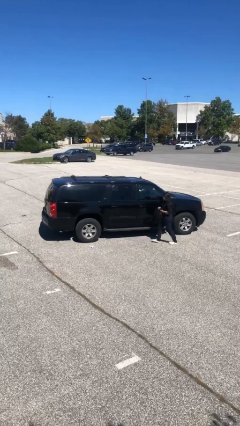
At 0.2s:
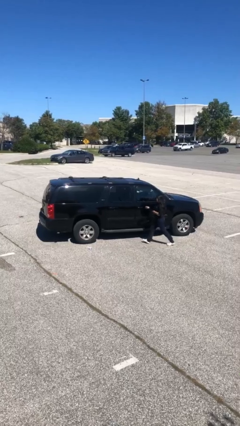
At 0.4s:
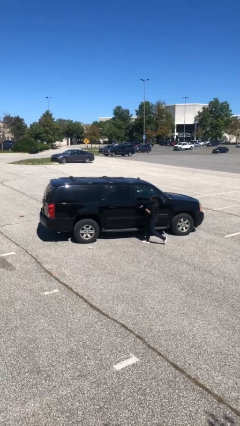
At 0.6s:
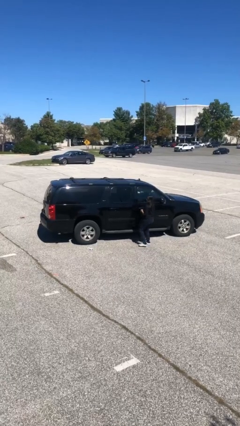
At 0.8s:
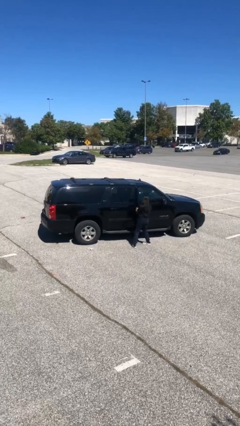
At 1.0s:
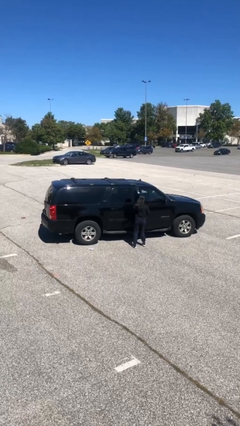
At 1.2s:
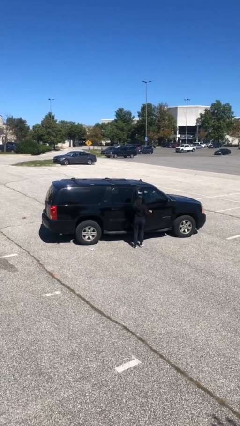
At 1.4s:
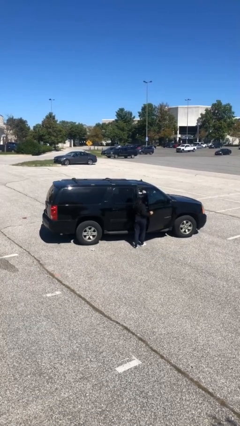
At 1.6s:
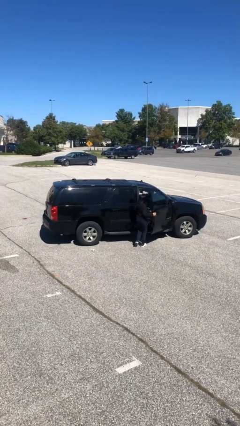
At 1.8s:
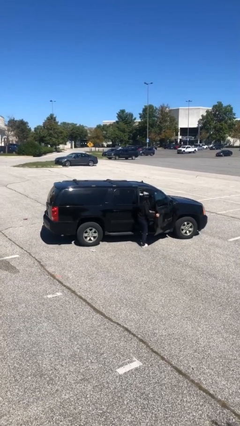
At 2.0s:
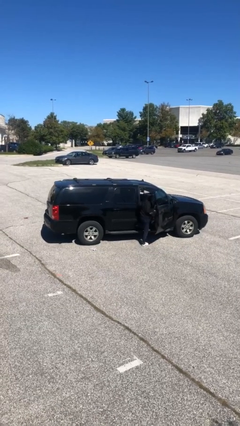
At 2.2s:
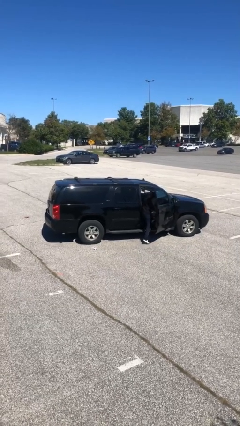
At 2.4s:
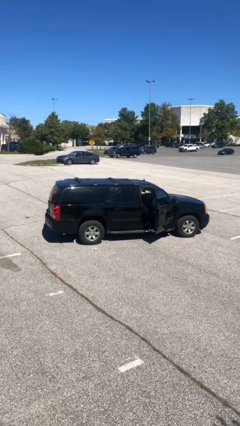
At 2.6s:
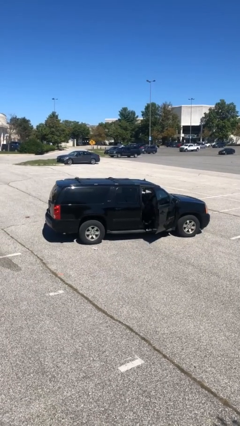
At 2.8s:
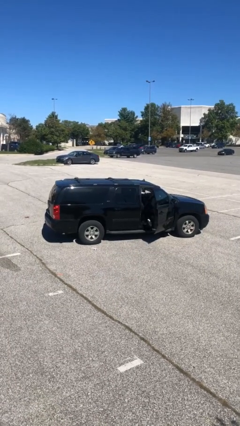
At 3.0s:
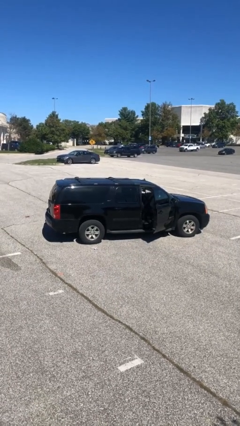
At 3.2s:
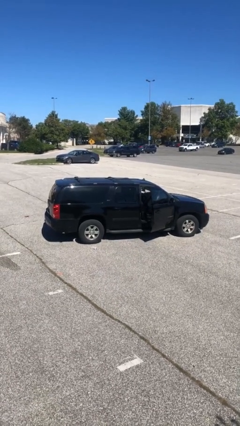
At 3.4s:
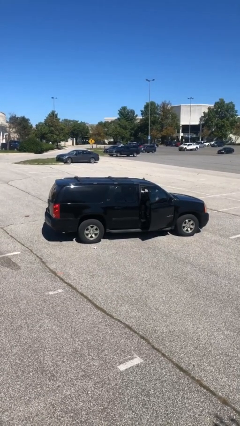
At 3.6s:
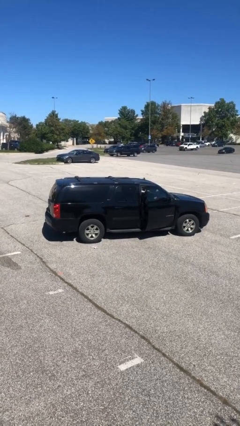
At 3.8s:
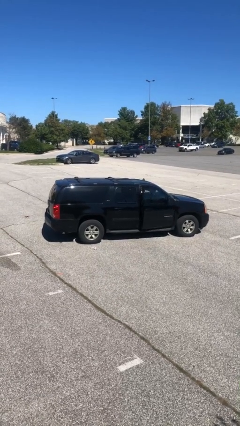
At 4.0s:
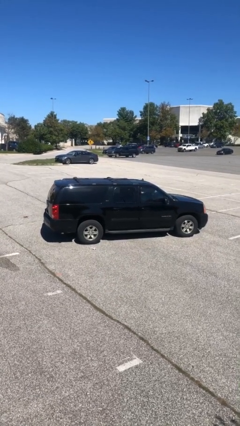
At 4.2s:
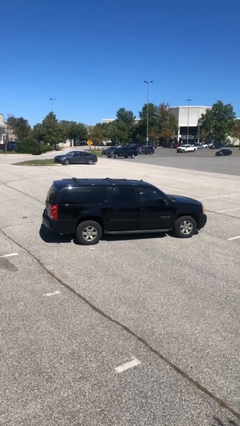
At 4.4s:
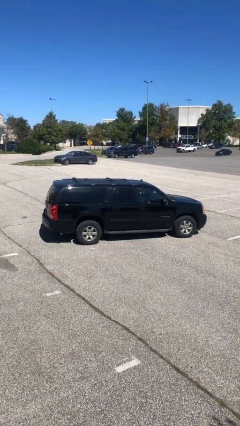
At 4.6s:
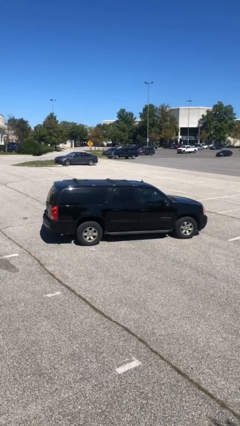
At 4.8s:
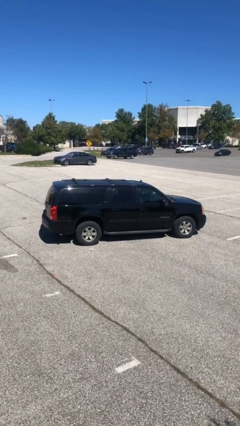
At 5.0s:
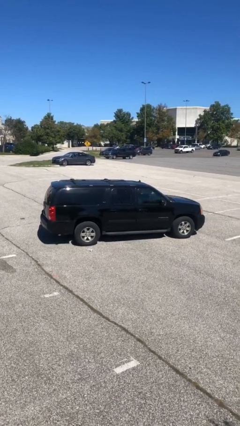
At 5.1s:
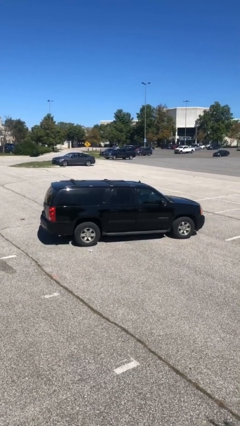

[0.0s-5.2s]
car picks up person

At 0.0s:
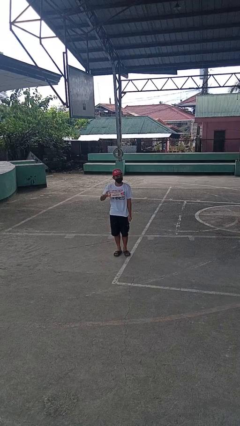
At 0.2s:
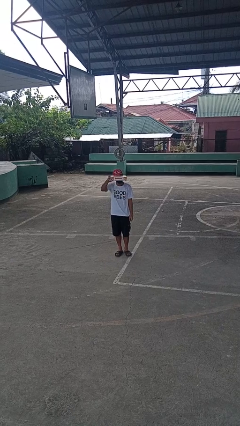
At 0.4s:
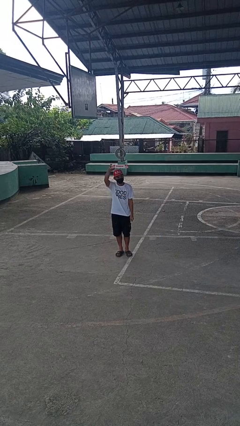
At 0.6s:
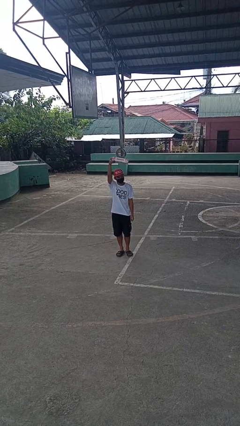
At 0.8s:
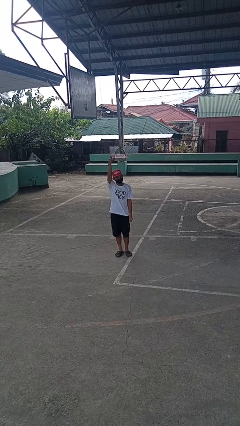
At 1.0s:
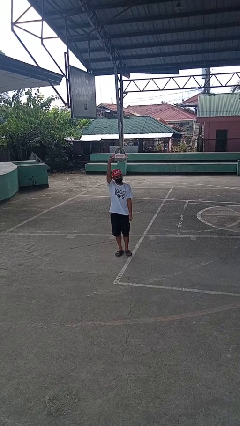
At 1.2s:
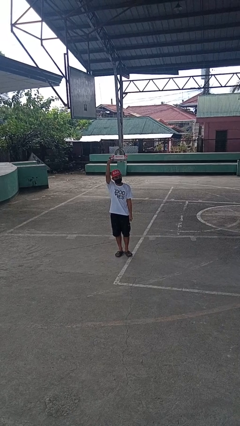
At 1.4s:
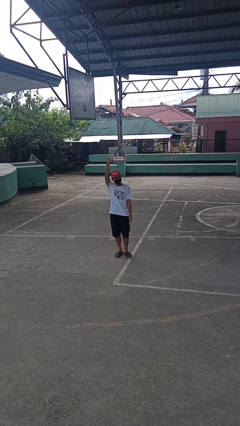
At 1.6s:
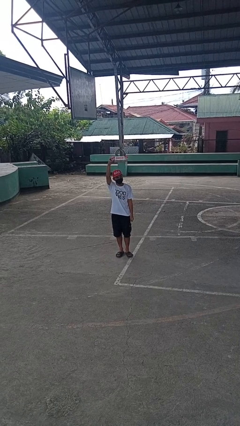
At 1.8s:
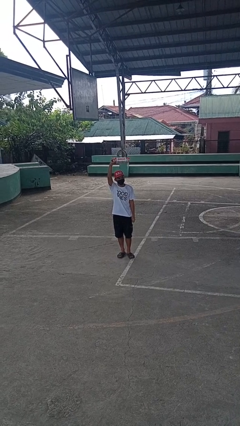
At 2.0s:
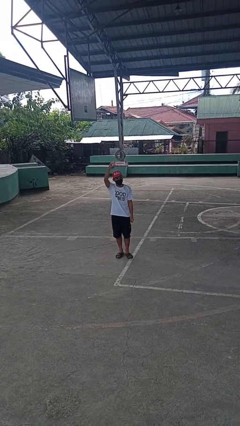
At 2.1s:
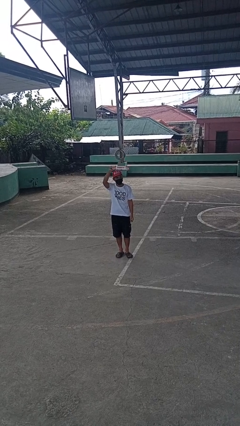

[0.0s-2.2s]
person holds object above head

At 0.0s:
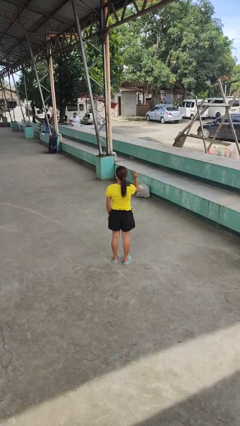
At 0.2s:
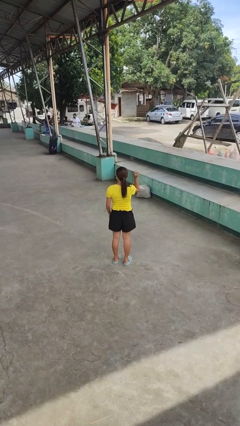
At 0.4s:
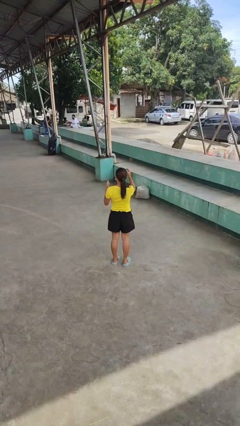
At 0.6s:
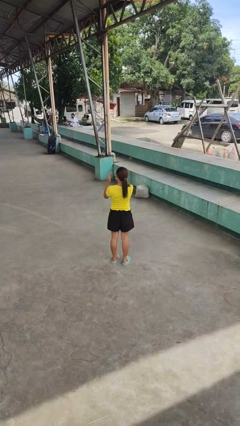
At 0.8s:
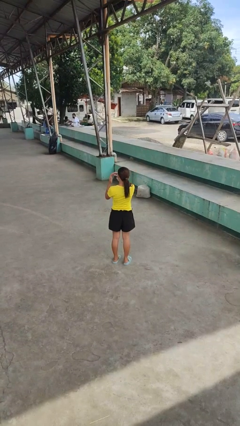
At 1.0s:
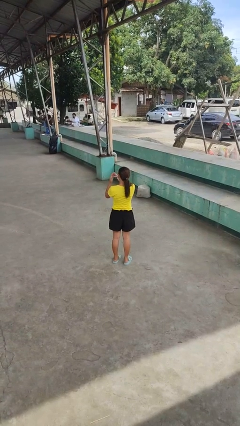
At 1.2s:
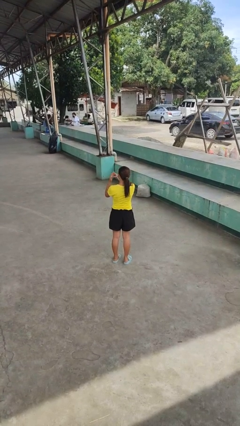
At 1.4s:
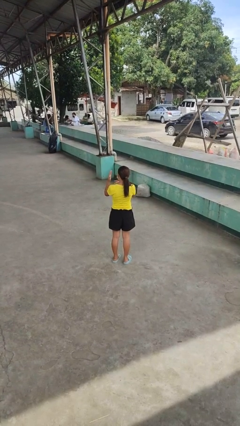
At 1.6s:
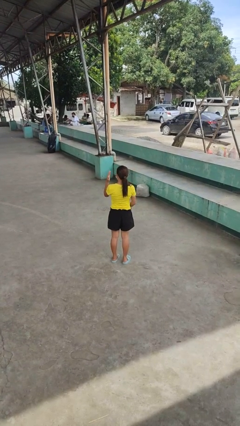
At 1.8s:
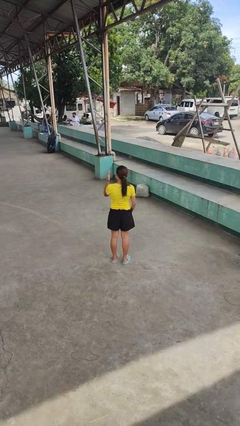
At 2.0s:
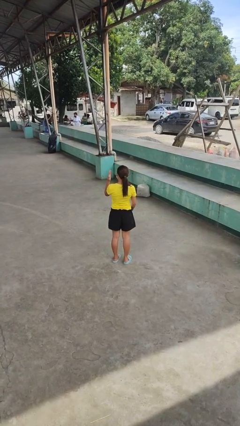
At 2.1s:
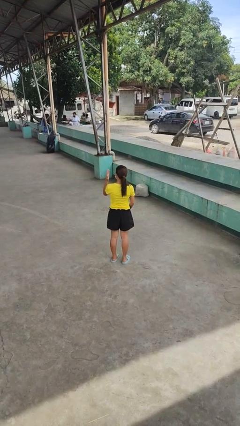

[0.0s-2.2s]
person puts on ring

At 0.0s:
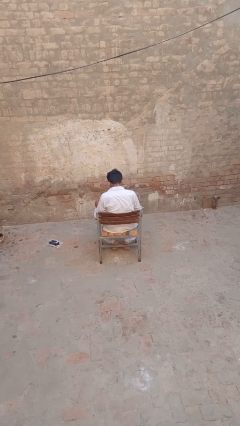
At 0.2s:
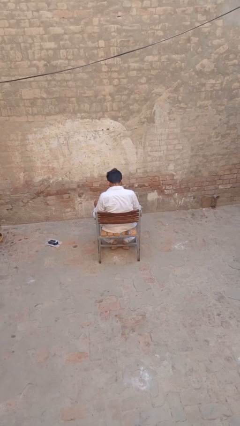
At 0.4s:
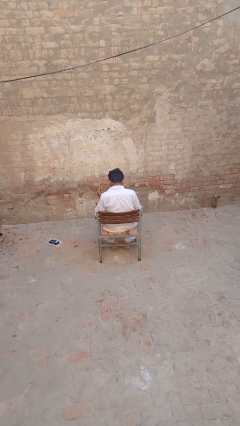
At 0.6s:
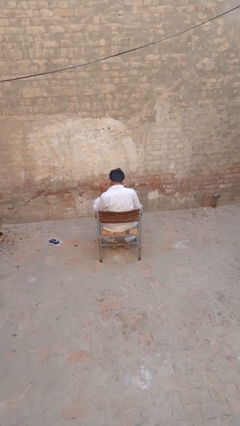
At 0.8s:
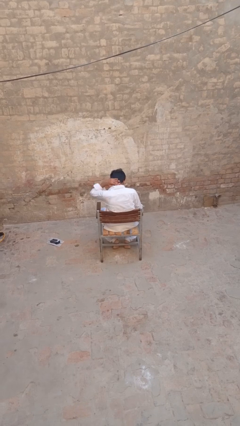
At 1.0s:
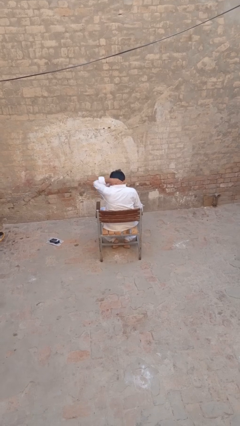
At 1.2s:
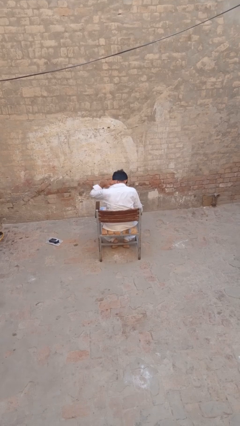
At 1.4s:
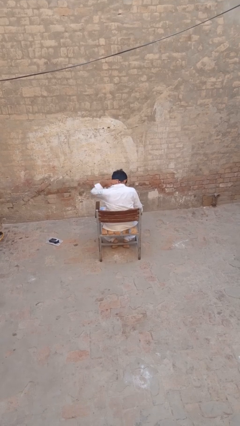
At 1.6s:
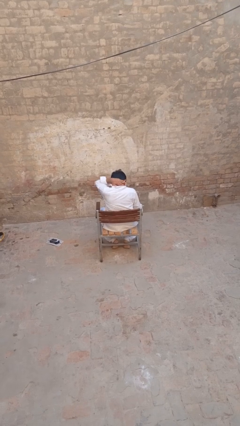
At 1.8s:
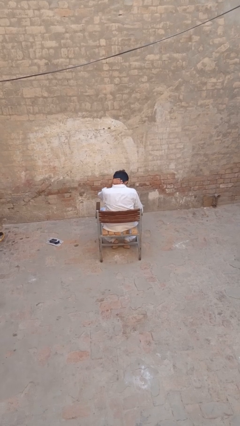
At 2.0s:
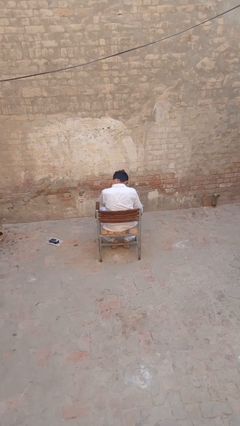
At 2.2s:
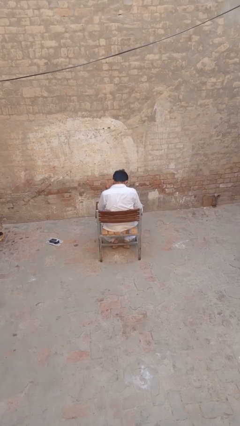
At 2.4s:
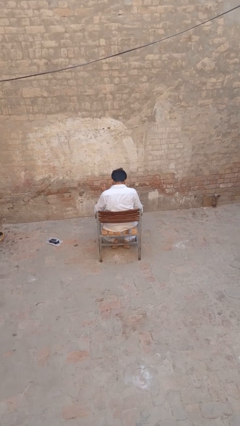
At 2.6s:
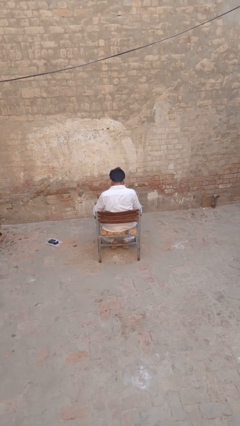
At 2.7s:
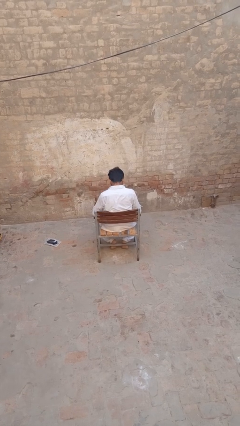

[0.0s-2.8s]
person rubs neck

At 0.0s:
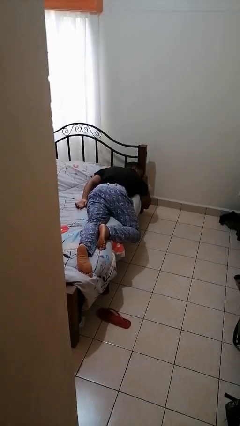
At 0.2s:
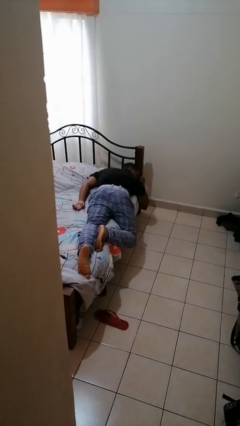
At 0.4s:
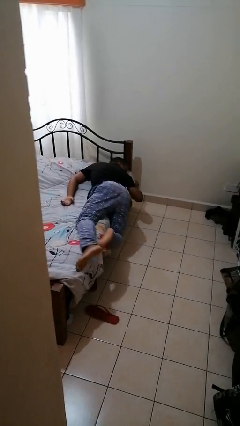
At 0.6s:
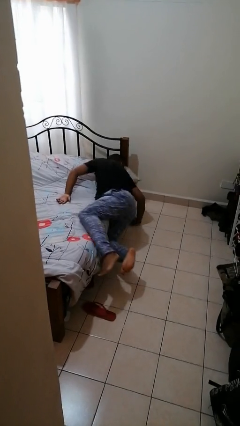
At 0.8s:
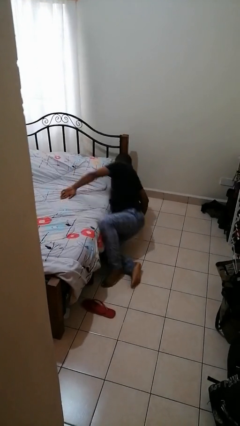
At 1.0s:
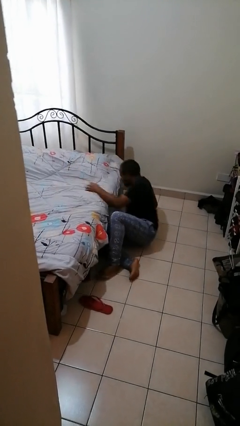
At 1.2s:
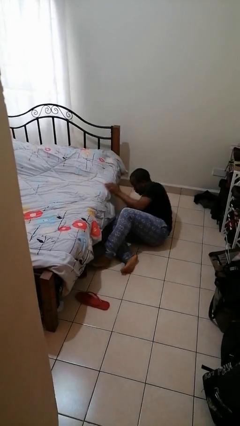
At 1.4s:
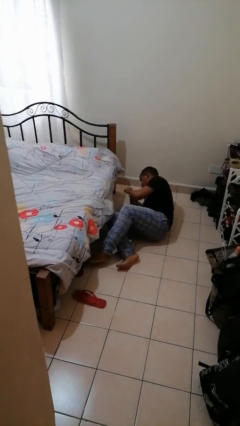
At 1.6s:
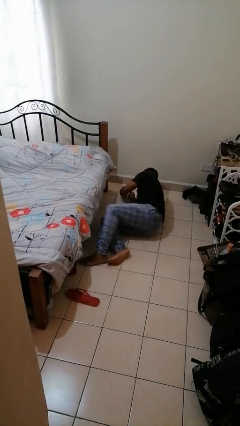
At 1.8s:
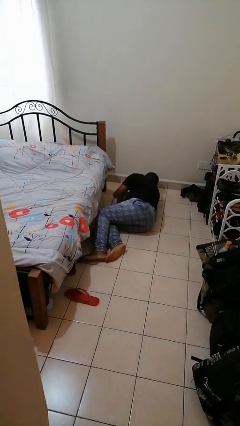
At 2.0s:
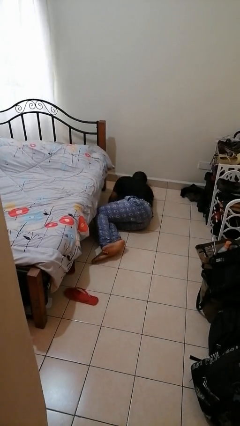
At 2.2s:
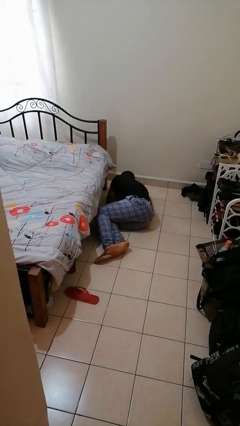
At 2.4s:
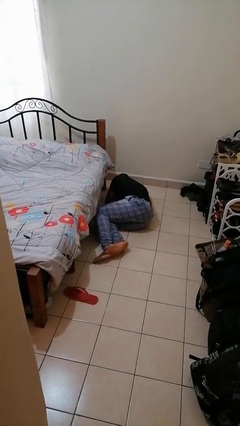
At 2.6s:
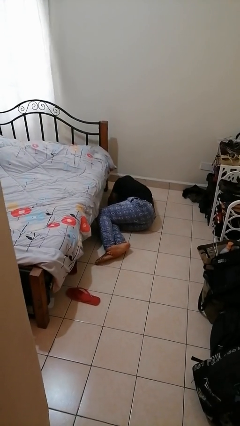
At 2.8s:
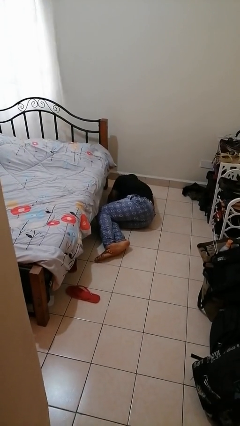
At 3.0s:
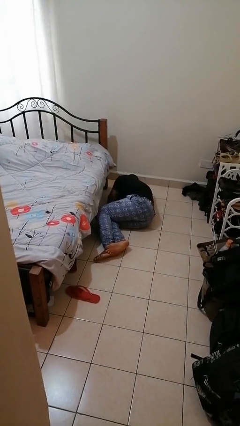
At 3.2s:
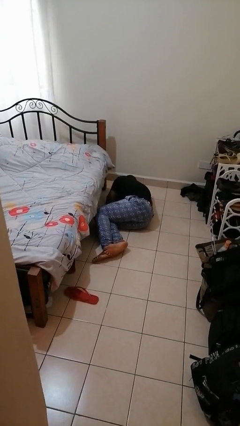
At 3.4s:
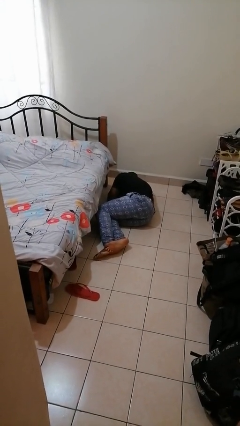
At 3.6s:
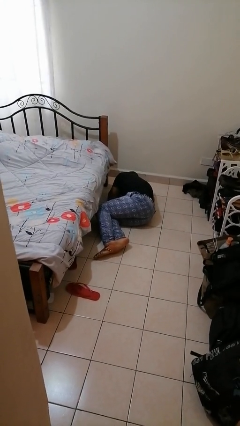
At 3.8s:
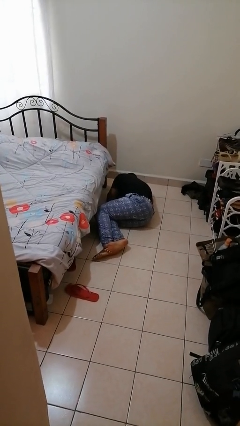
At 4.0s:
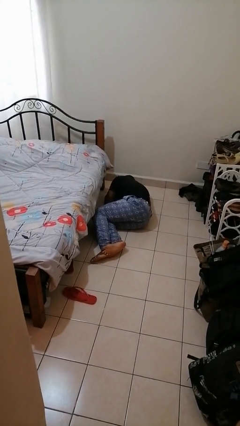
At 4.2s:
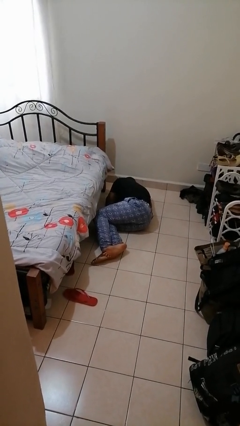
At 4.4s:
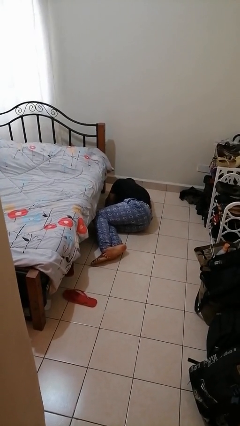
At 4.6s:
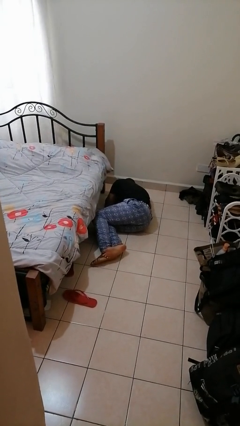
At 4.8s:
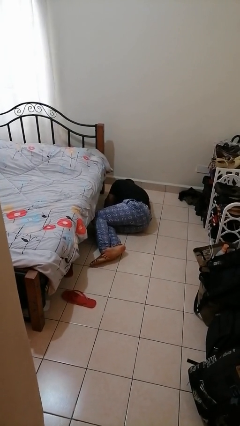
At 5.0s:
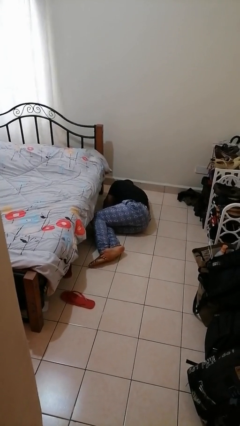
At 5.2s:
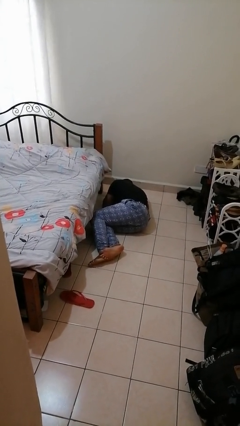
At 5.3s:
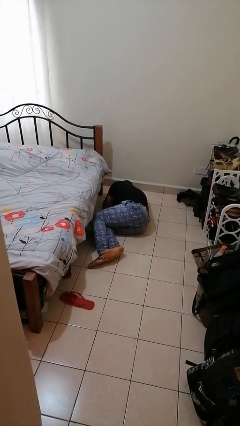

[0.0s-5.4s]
person falls from bed

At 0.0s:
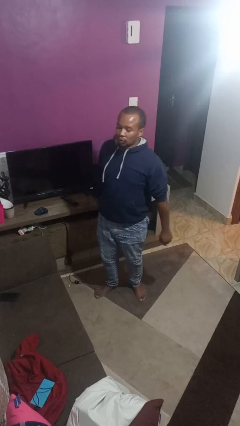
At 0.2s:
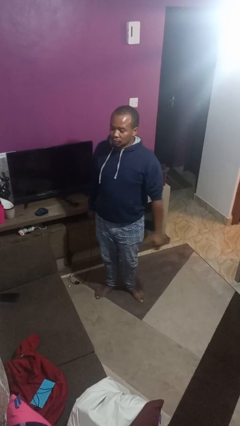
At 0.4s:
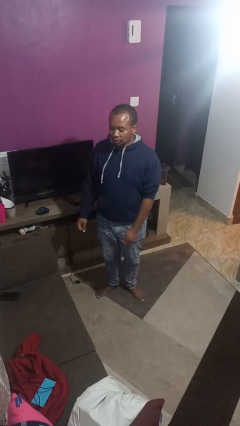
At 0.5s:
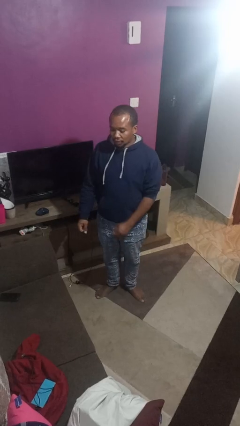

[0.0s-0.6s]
person twirls
